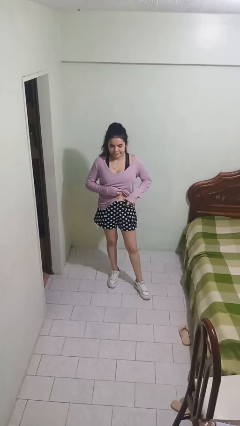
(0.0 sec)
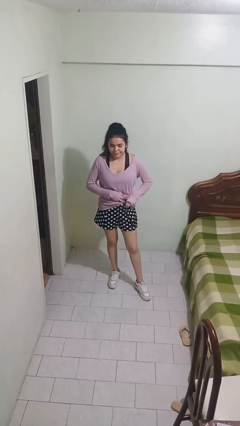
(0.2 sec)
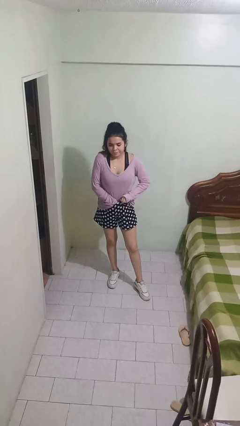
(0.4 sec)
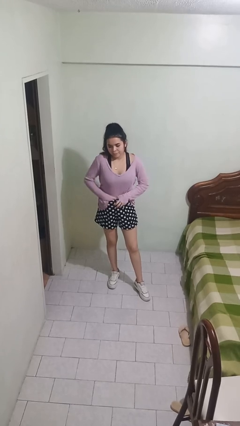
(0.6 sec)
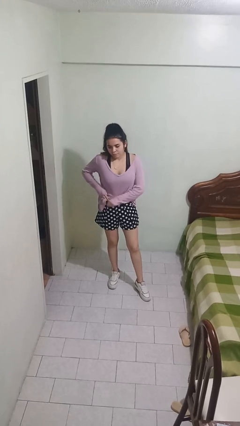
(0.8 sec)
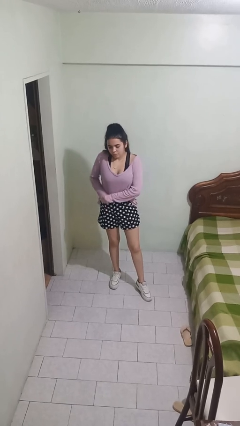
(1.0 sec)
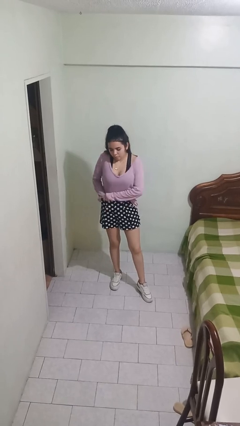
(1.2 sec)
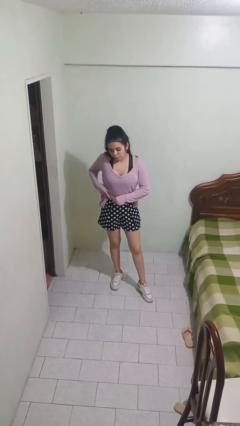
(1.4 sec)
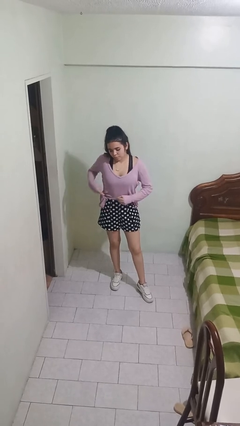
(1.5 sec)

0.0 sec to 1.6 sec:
person tucks in shirt

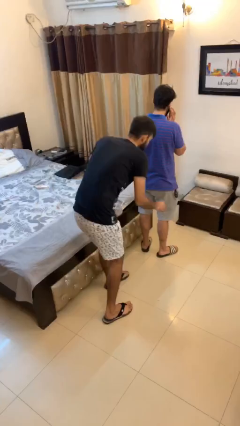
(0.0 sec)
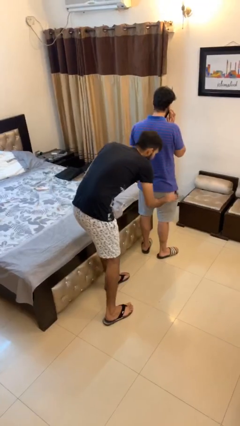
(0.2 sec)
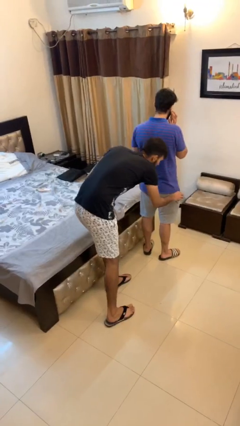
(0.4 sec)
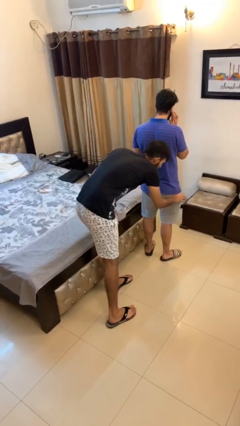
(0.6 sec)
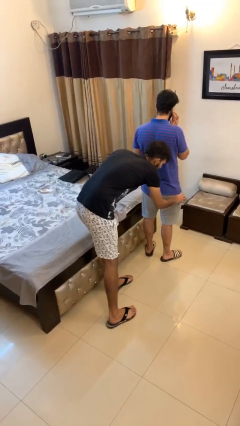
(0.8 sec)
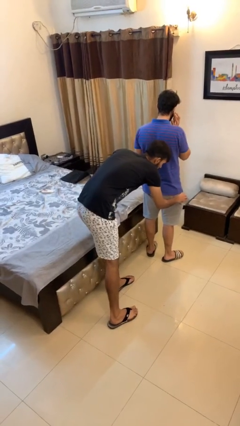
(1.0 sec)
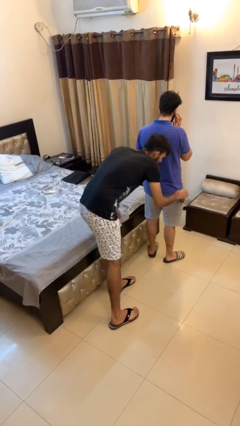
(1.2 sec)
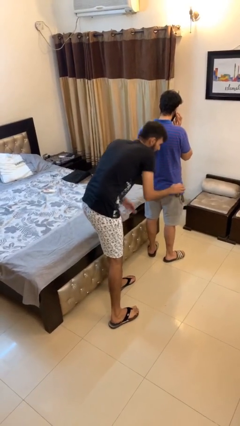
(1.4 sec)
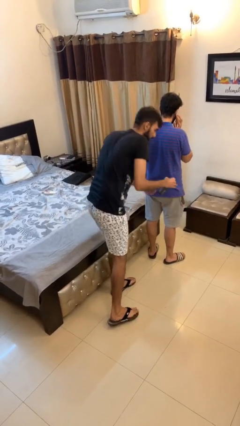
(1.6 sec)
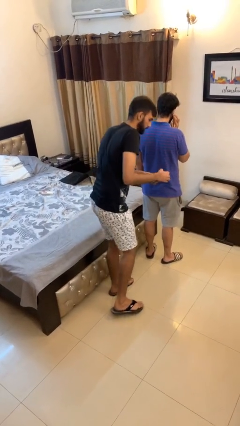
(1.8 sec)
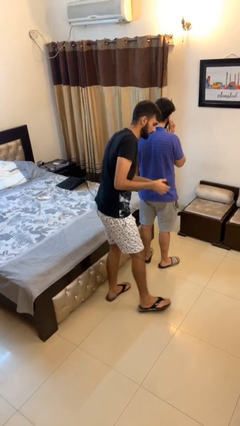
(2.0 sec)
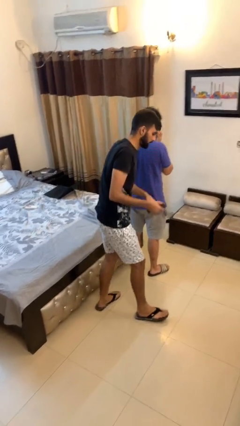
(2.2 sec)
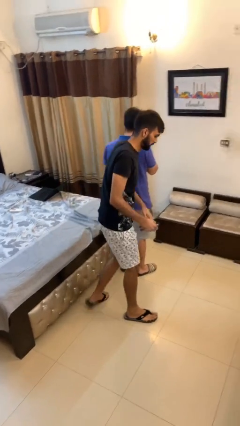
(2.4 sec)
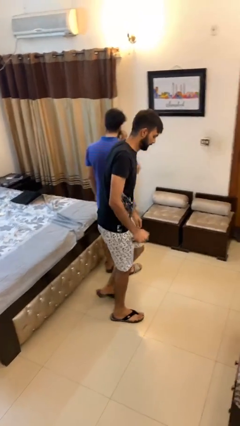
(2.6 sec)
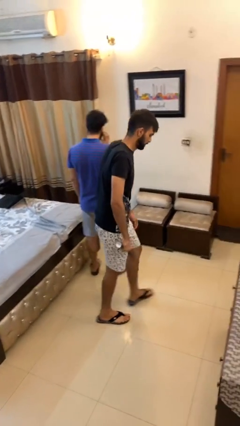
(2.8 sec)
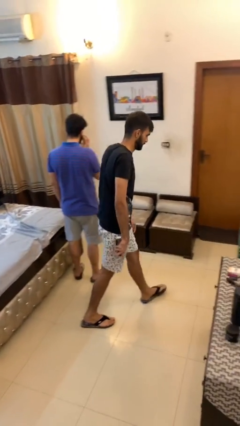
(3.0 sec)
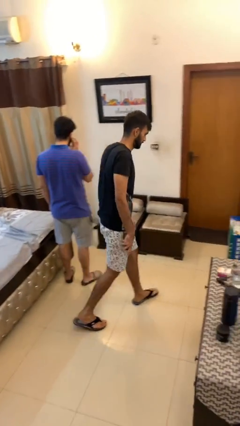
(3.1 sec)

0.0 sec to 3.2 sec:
person steals object from person

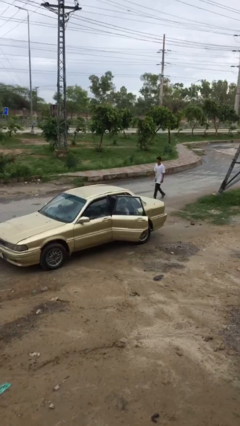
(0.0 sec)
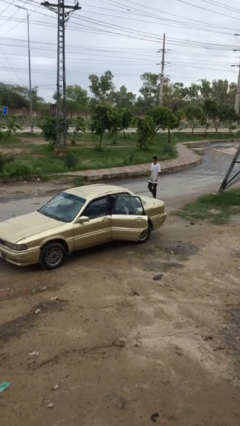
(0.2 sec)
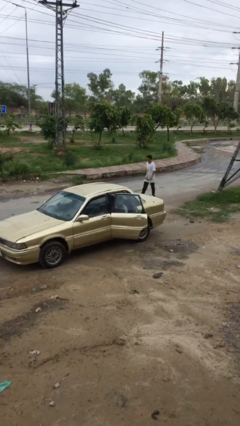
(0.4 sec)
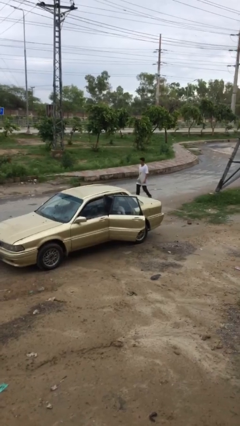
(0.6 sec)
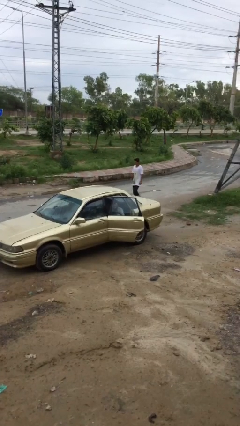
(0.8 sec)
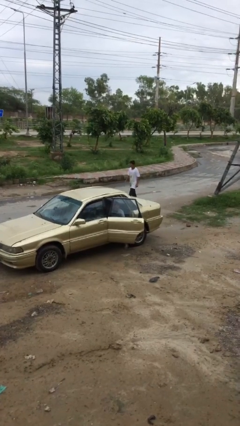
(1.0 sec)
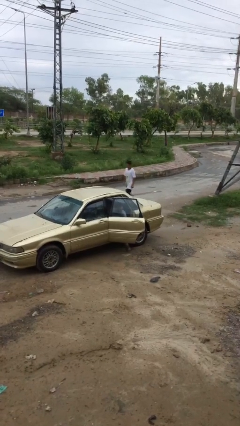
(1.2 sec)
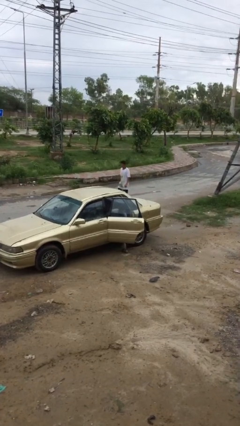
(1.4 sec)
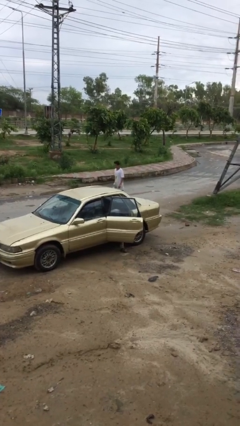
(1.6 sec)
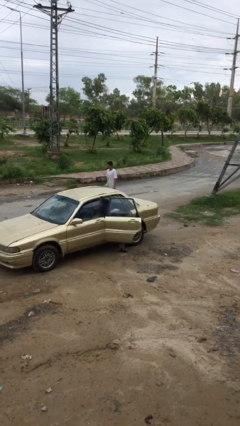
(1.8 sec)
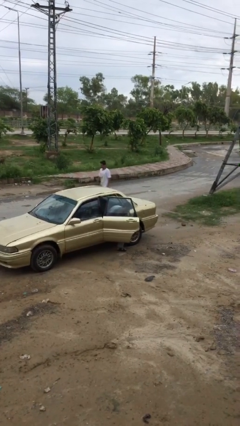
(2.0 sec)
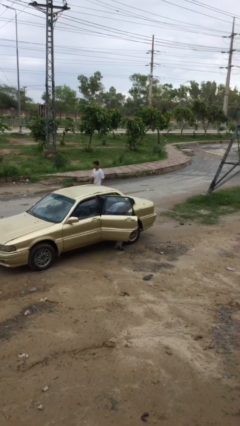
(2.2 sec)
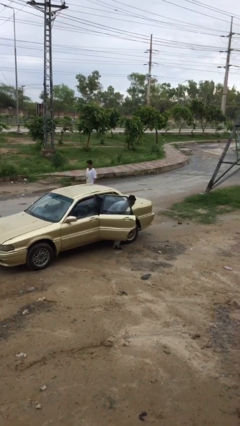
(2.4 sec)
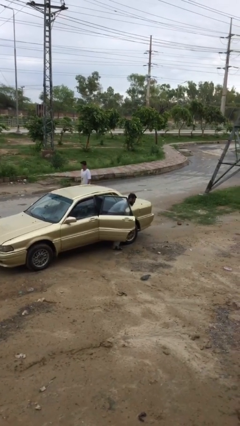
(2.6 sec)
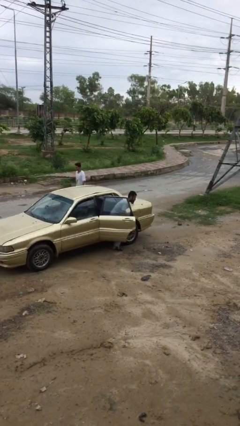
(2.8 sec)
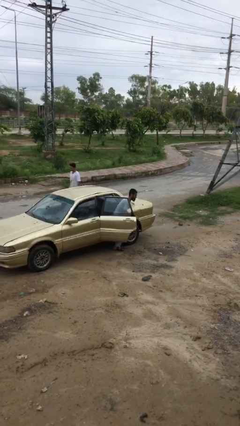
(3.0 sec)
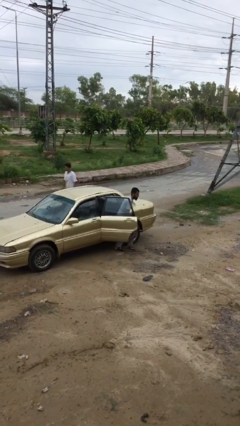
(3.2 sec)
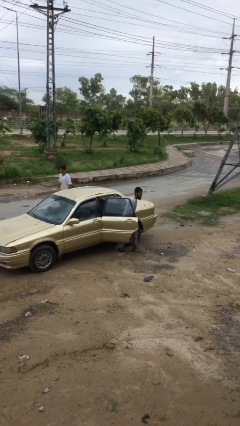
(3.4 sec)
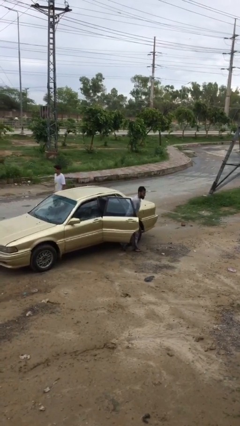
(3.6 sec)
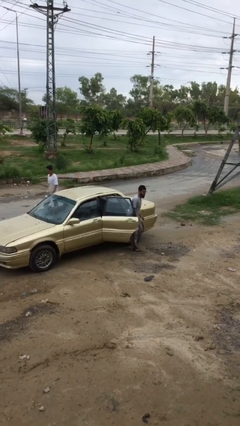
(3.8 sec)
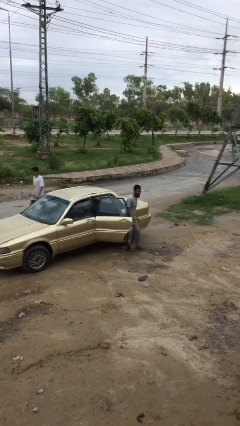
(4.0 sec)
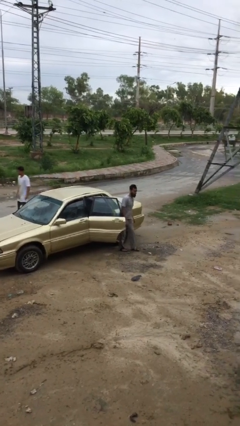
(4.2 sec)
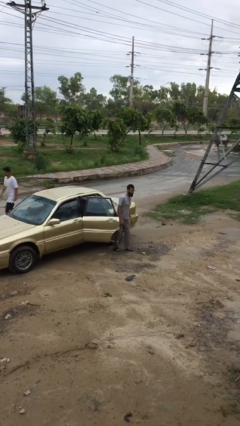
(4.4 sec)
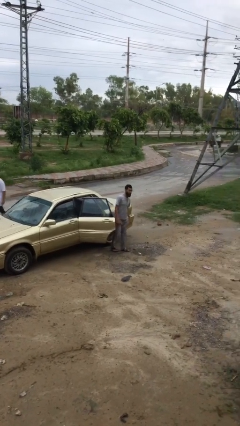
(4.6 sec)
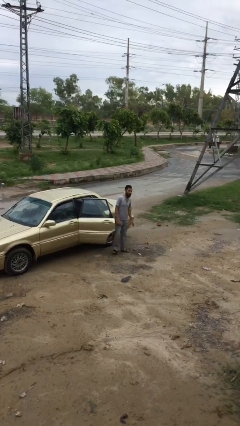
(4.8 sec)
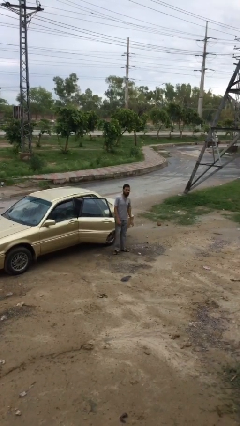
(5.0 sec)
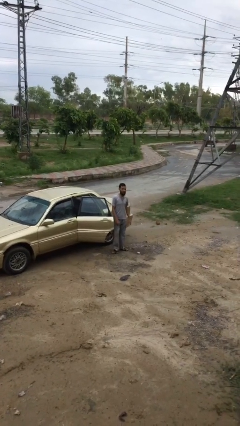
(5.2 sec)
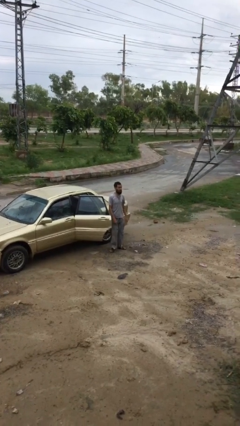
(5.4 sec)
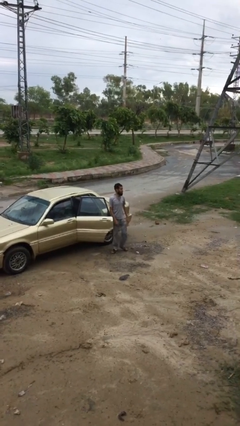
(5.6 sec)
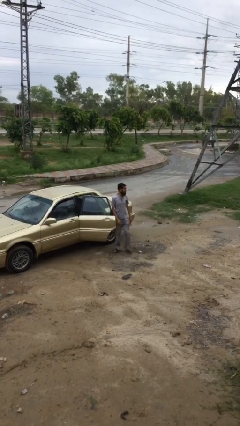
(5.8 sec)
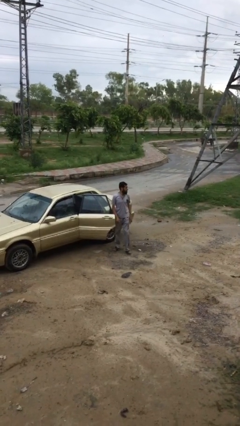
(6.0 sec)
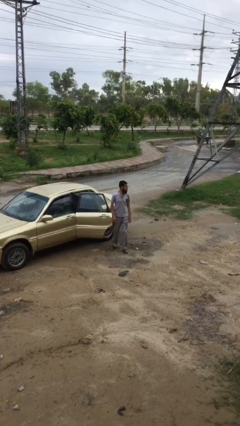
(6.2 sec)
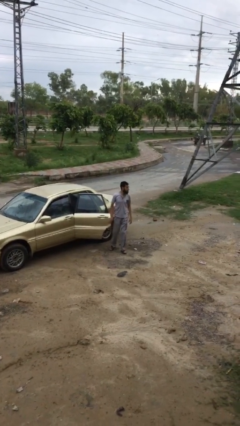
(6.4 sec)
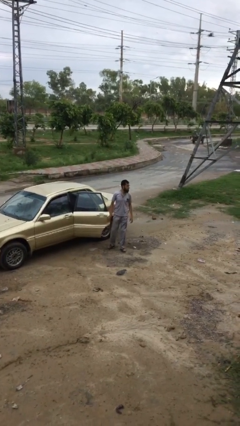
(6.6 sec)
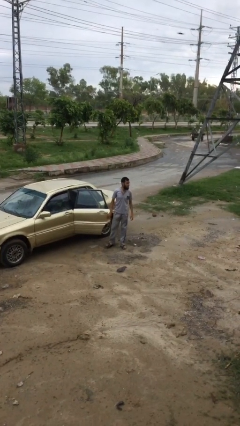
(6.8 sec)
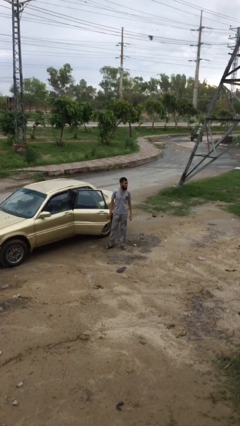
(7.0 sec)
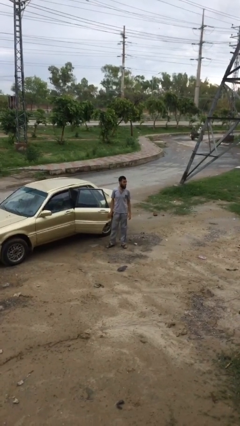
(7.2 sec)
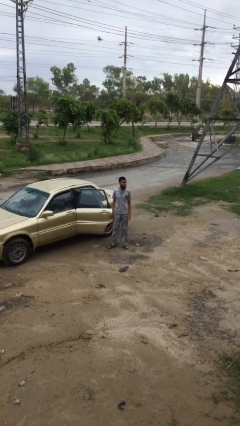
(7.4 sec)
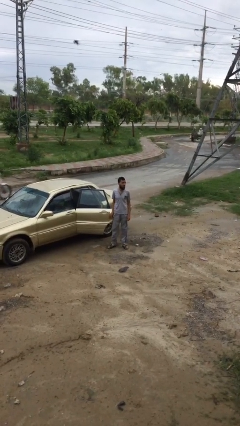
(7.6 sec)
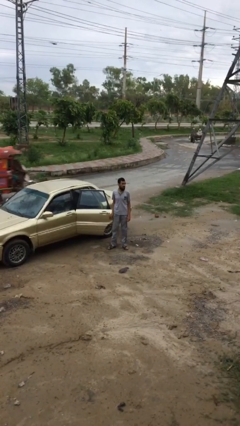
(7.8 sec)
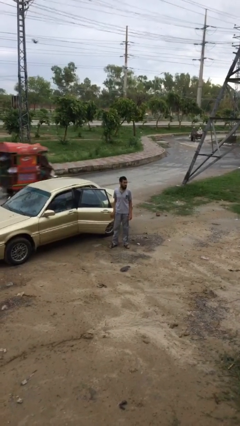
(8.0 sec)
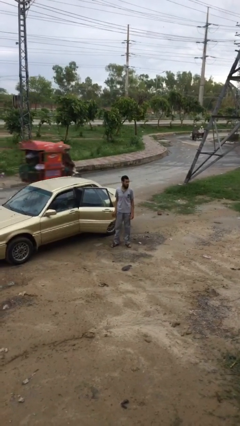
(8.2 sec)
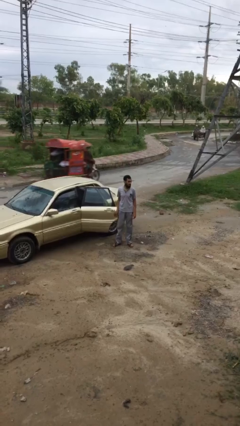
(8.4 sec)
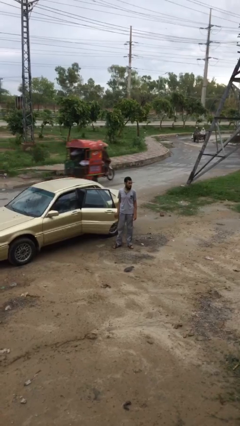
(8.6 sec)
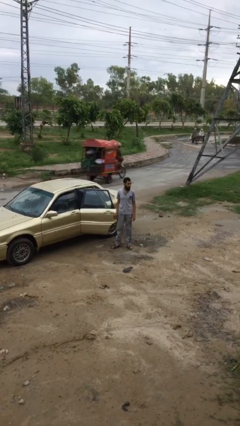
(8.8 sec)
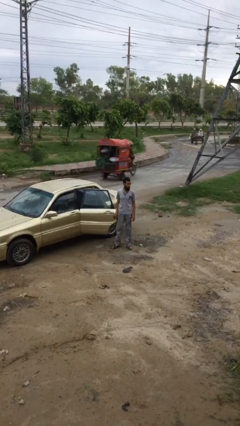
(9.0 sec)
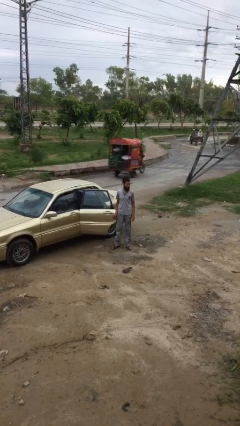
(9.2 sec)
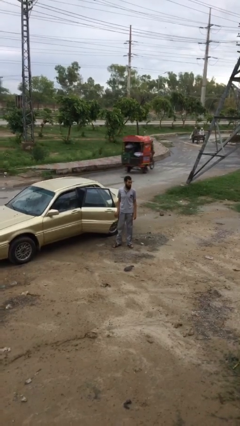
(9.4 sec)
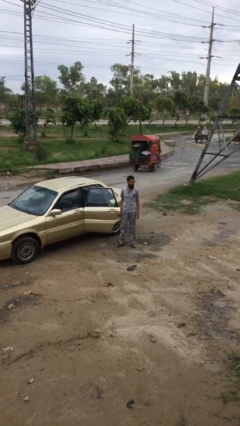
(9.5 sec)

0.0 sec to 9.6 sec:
person exits car

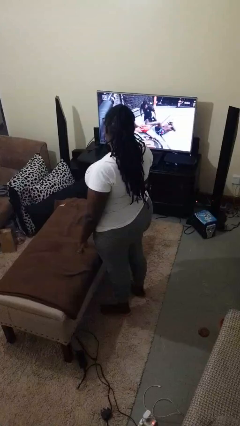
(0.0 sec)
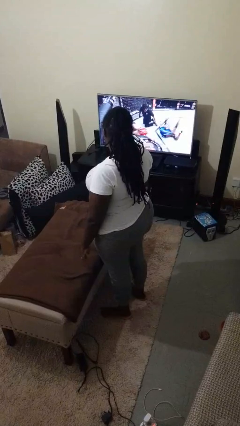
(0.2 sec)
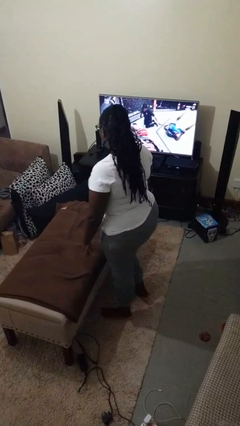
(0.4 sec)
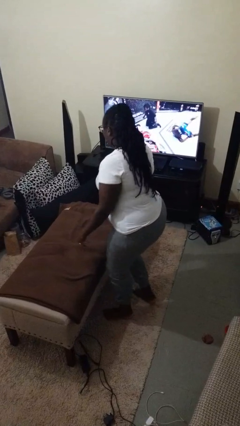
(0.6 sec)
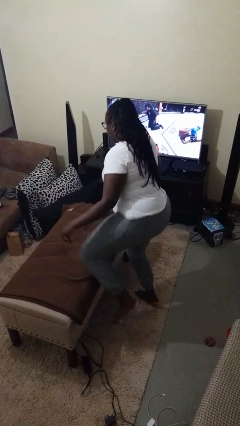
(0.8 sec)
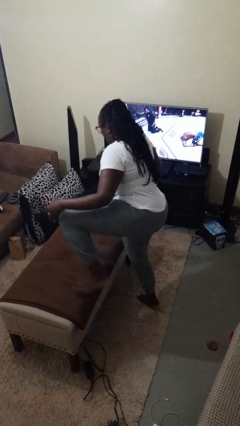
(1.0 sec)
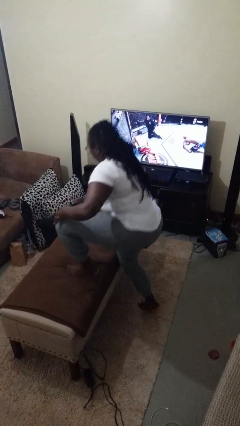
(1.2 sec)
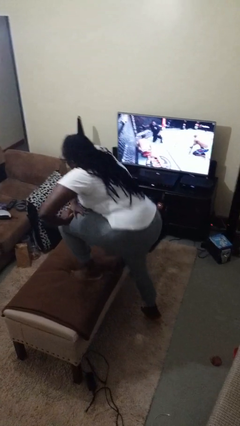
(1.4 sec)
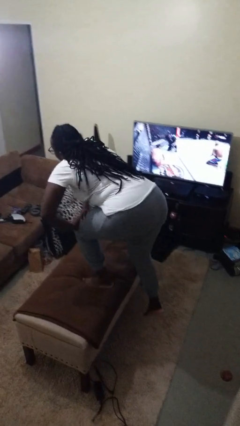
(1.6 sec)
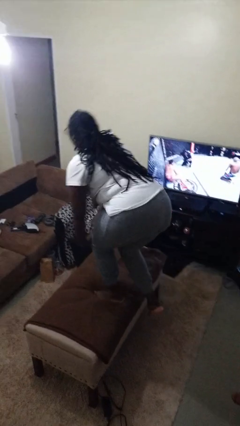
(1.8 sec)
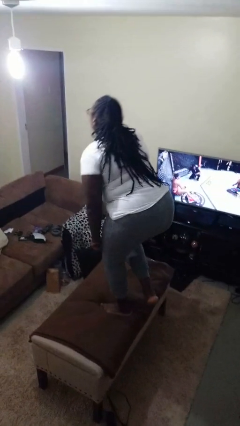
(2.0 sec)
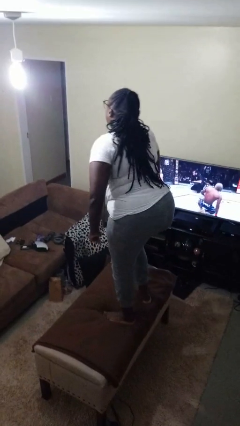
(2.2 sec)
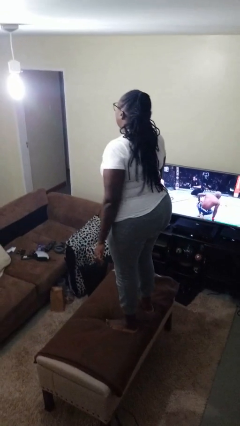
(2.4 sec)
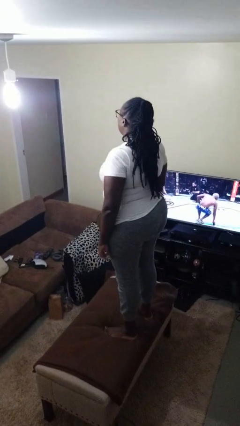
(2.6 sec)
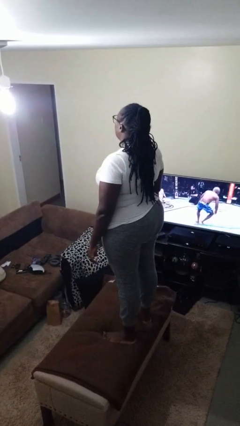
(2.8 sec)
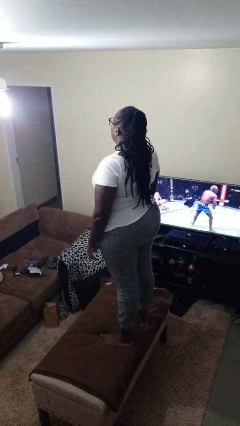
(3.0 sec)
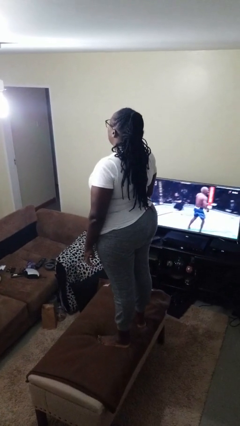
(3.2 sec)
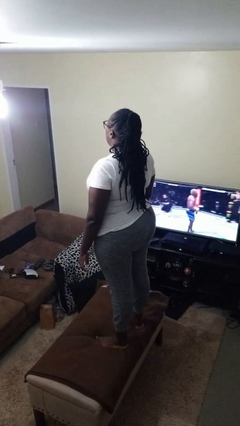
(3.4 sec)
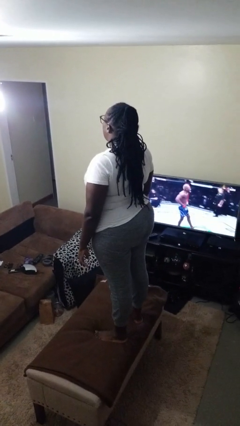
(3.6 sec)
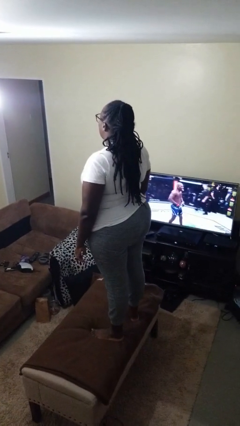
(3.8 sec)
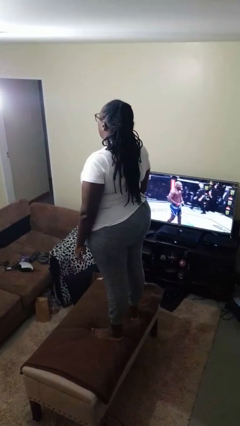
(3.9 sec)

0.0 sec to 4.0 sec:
person climbs on table
